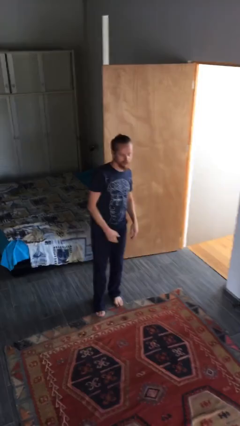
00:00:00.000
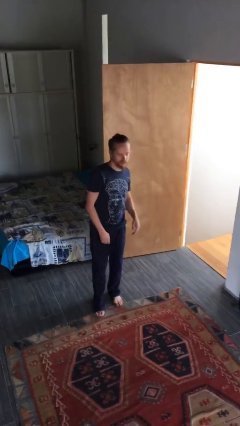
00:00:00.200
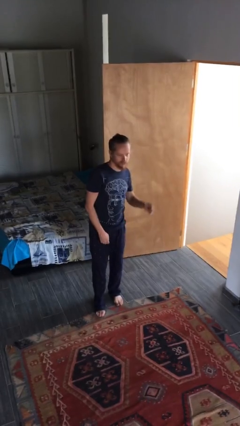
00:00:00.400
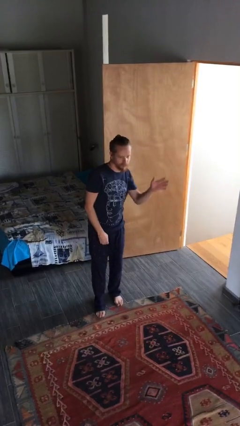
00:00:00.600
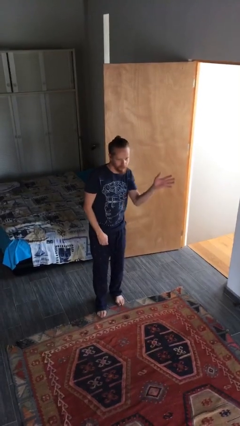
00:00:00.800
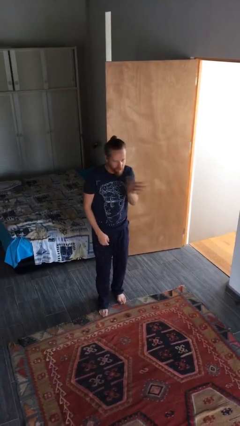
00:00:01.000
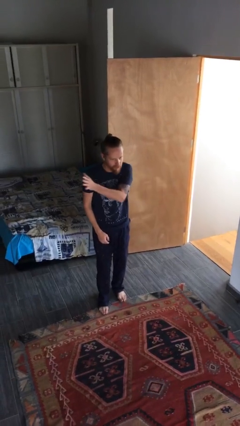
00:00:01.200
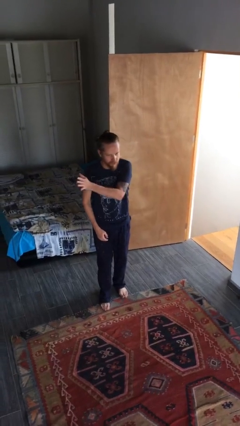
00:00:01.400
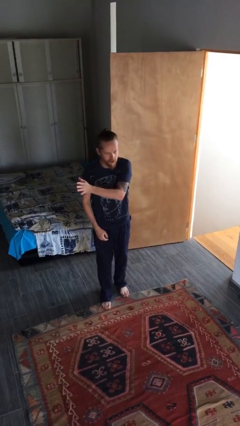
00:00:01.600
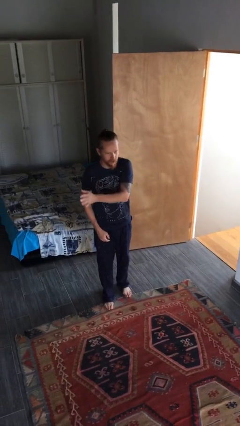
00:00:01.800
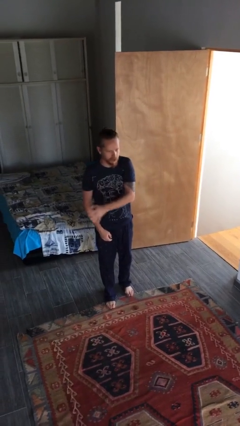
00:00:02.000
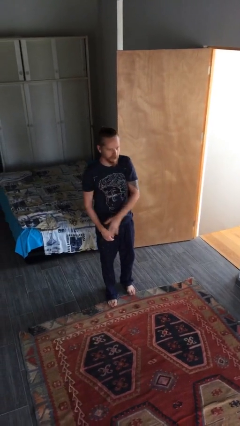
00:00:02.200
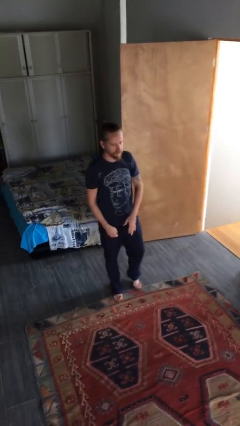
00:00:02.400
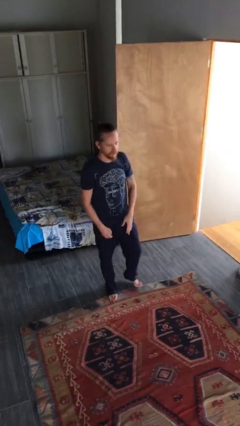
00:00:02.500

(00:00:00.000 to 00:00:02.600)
person gestures swipe right

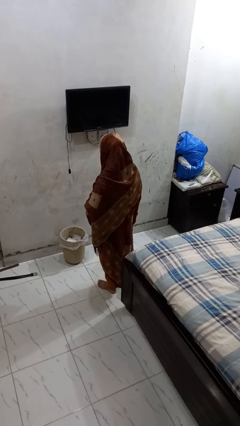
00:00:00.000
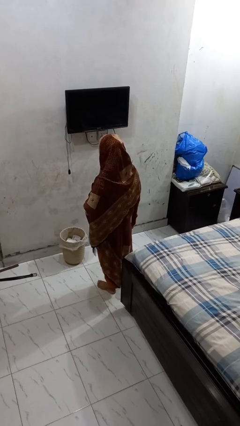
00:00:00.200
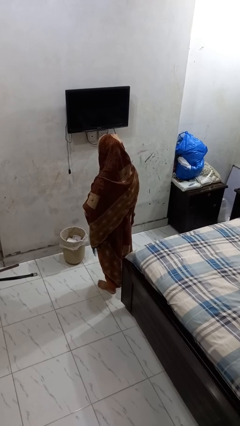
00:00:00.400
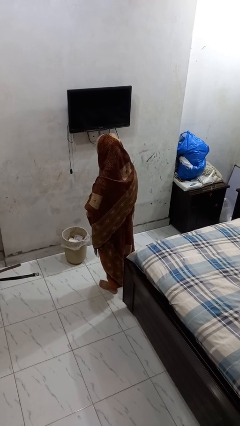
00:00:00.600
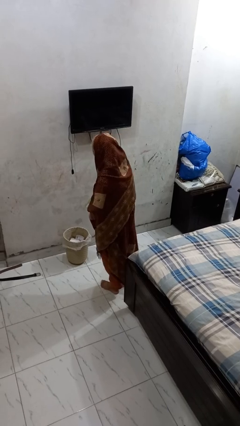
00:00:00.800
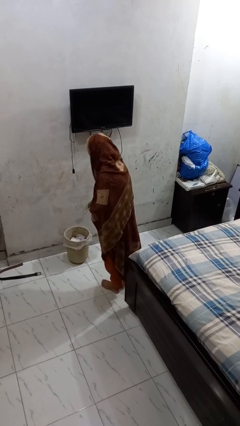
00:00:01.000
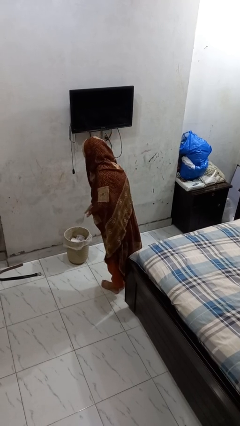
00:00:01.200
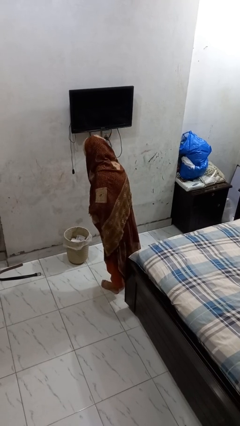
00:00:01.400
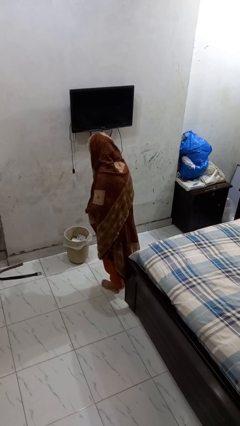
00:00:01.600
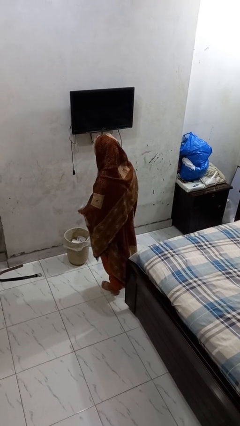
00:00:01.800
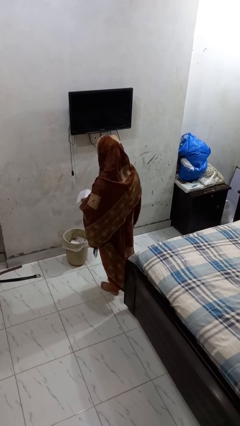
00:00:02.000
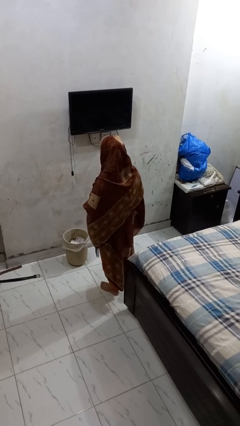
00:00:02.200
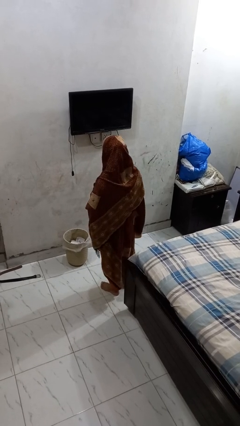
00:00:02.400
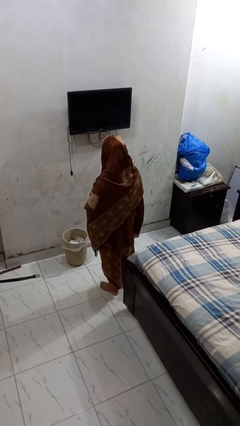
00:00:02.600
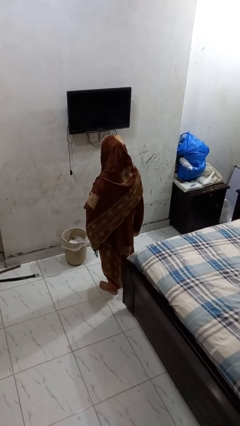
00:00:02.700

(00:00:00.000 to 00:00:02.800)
person discards trash

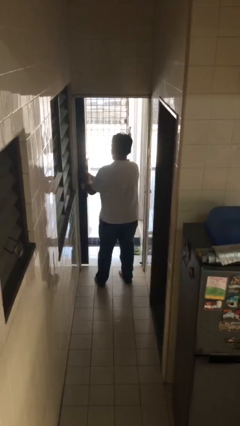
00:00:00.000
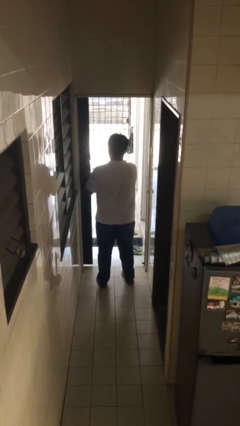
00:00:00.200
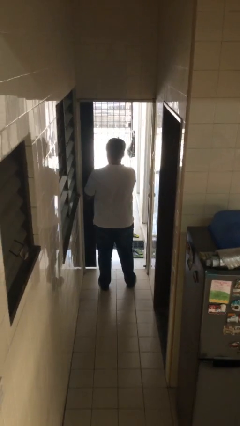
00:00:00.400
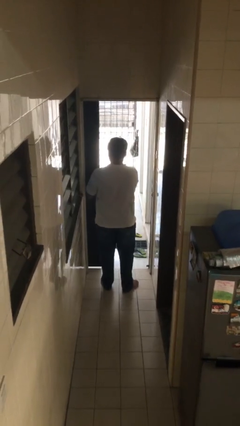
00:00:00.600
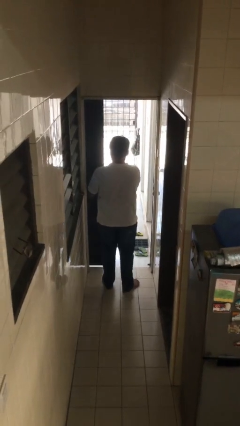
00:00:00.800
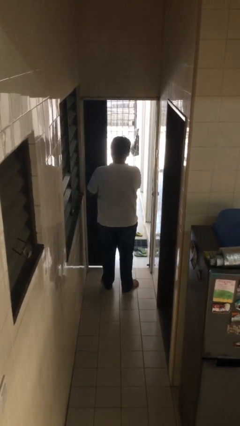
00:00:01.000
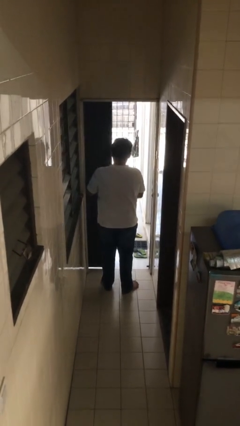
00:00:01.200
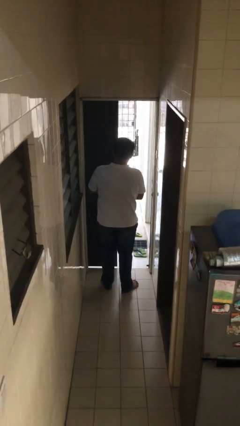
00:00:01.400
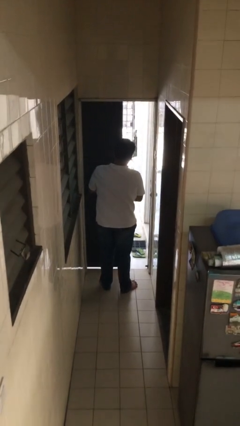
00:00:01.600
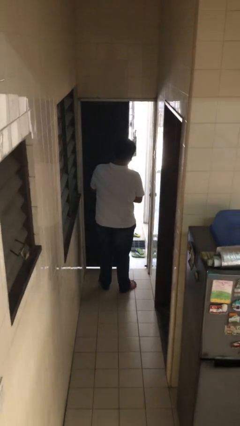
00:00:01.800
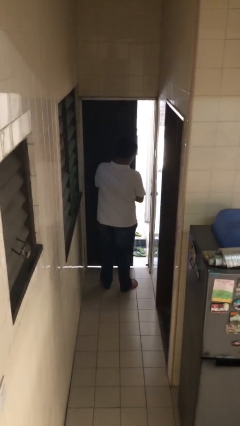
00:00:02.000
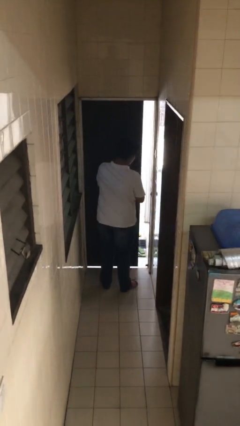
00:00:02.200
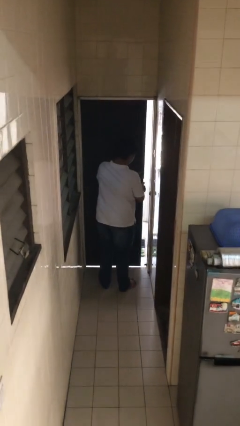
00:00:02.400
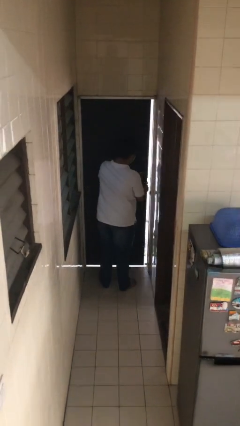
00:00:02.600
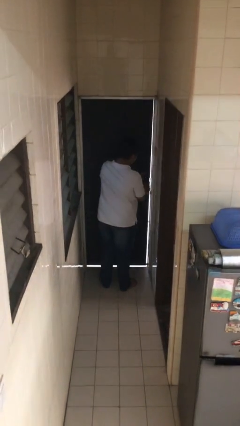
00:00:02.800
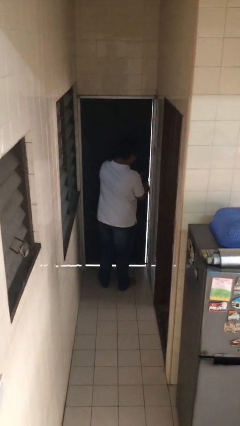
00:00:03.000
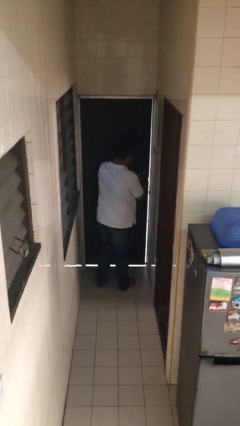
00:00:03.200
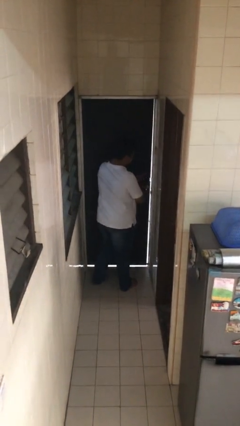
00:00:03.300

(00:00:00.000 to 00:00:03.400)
person closes facility door

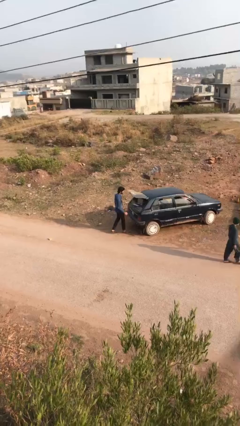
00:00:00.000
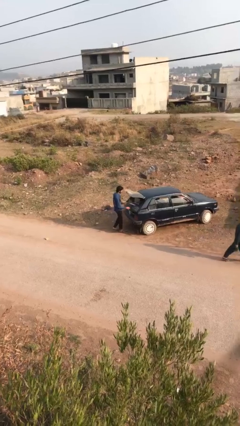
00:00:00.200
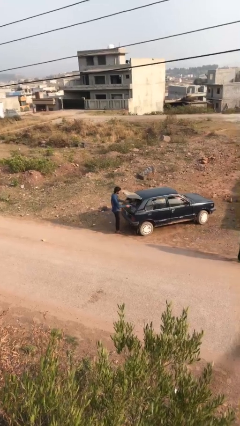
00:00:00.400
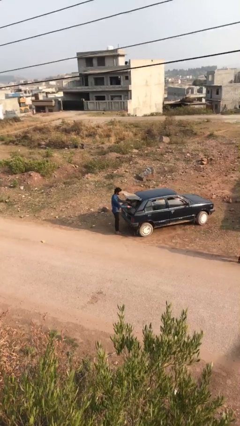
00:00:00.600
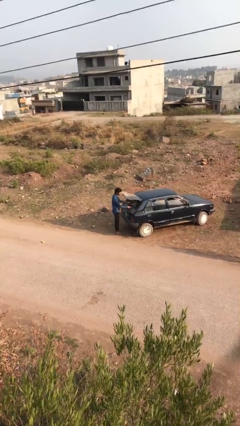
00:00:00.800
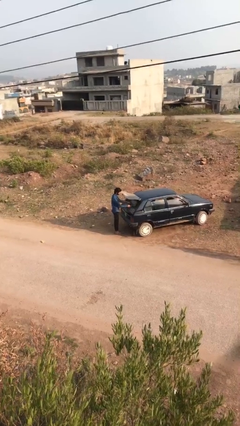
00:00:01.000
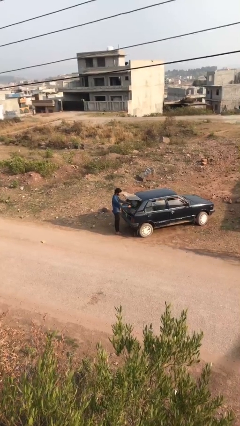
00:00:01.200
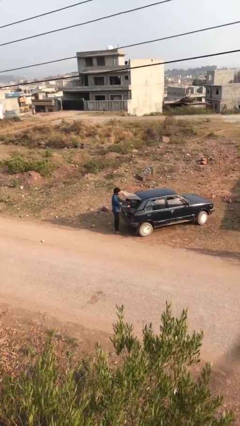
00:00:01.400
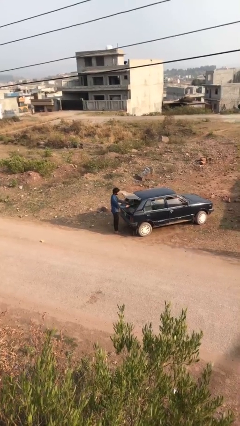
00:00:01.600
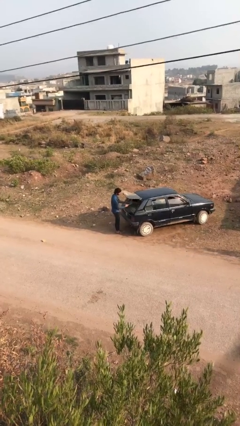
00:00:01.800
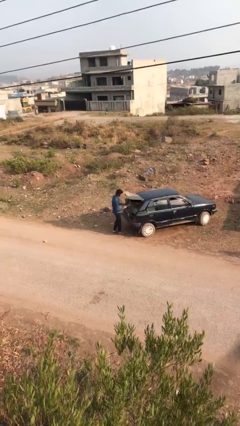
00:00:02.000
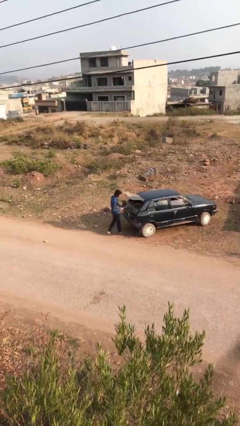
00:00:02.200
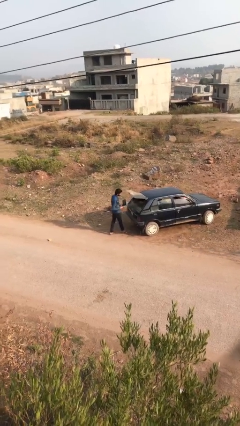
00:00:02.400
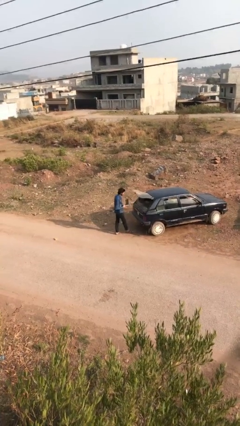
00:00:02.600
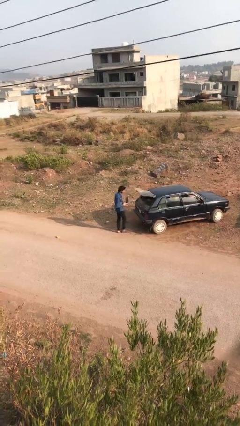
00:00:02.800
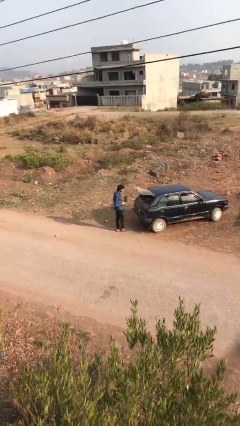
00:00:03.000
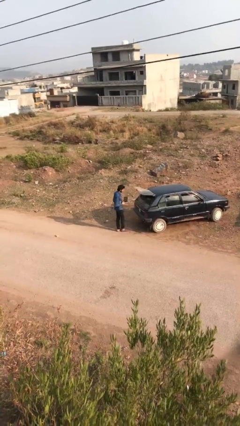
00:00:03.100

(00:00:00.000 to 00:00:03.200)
person unloads car

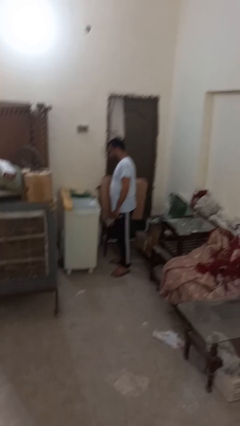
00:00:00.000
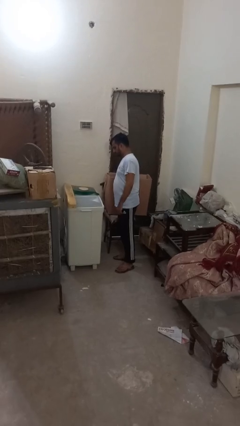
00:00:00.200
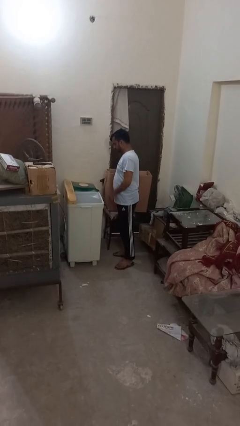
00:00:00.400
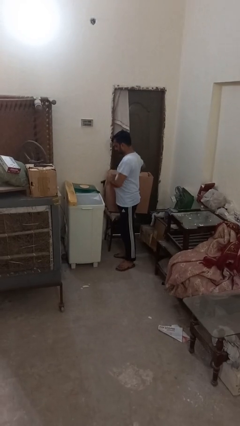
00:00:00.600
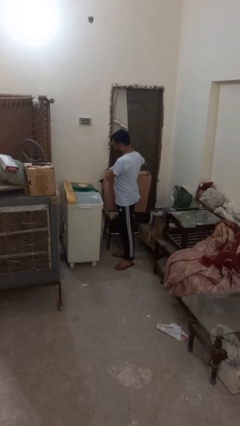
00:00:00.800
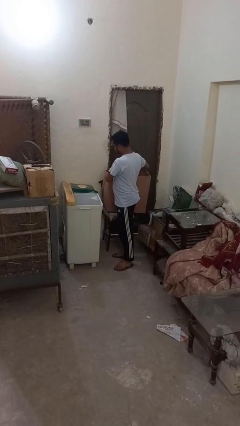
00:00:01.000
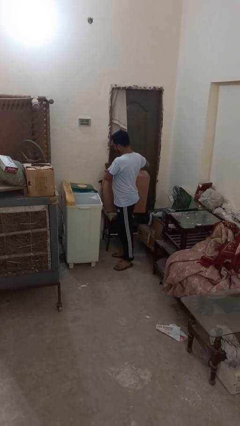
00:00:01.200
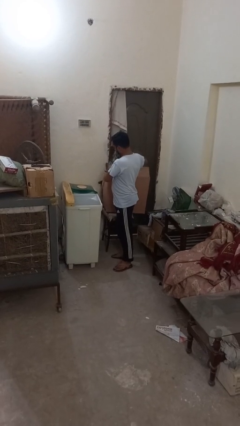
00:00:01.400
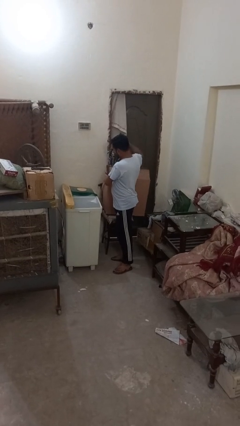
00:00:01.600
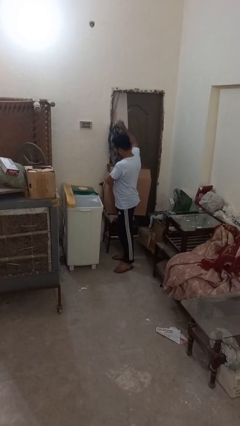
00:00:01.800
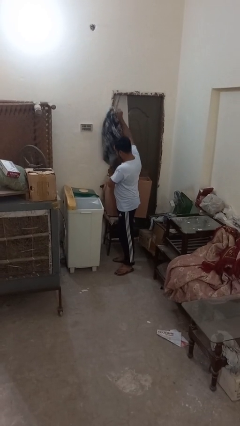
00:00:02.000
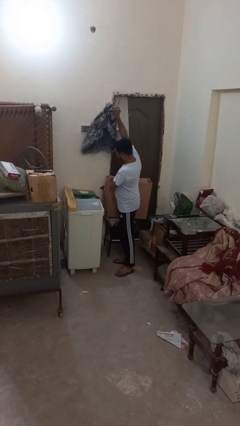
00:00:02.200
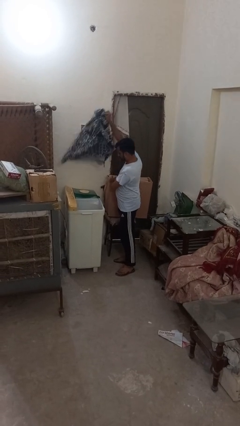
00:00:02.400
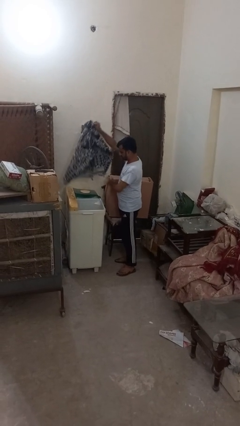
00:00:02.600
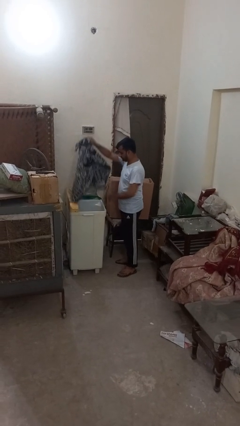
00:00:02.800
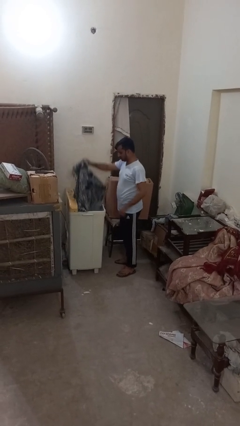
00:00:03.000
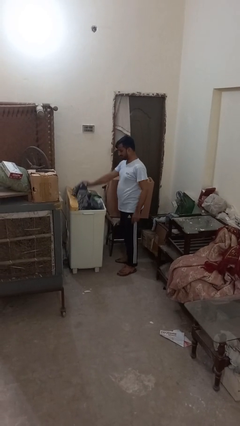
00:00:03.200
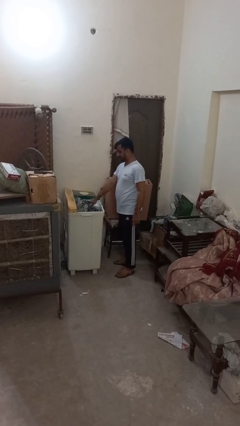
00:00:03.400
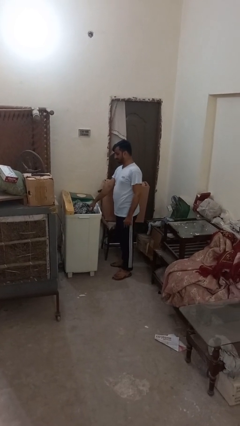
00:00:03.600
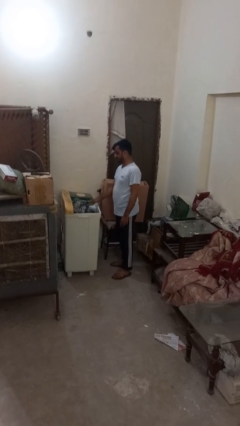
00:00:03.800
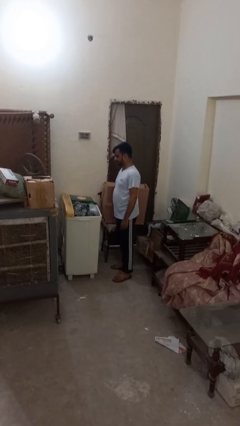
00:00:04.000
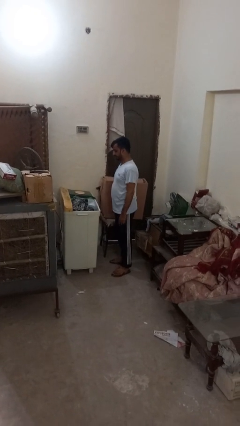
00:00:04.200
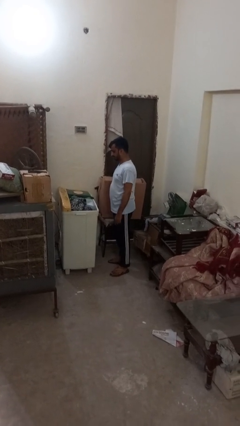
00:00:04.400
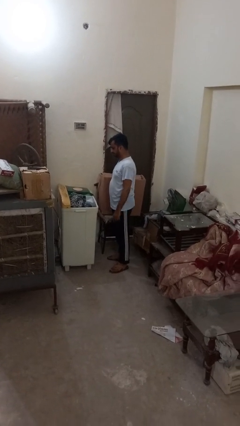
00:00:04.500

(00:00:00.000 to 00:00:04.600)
person loads dryer

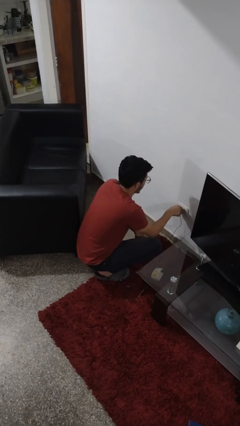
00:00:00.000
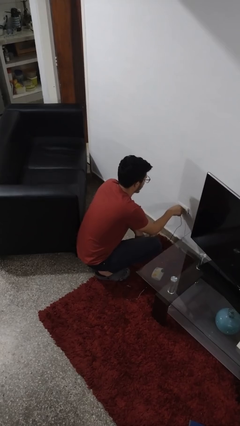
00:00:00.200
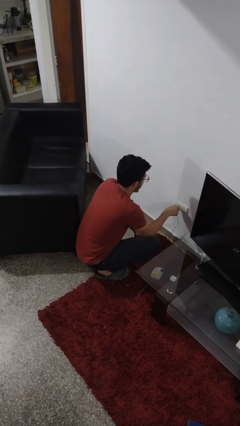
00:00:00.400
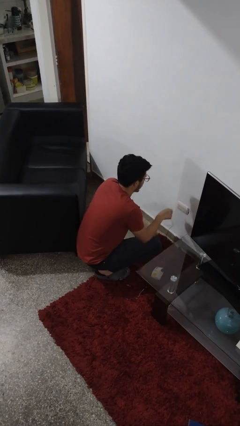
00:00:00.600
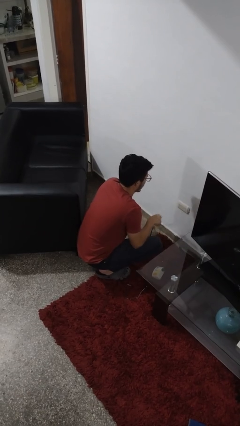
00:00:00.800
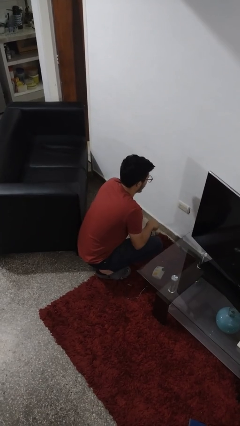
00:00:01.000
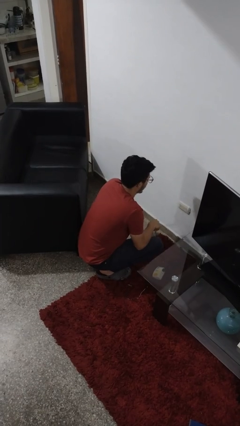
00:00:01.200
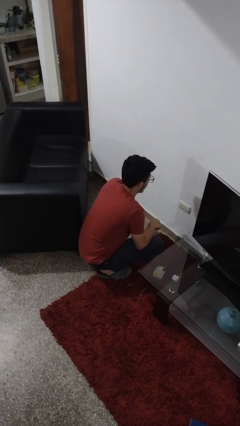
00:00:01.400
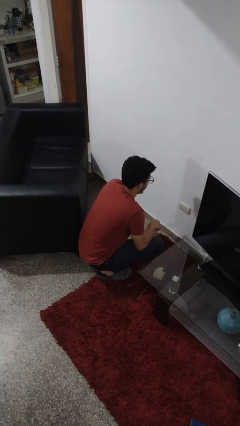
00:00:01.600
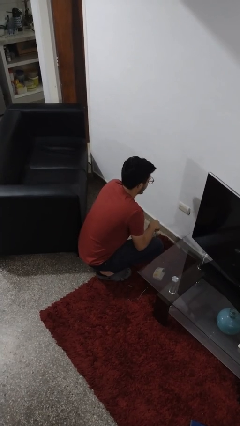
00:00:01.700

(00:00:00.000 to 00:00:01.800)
person unplugs from electrical socket
